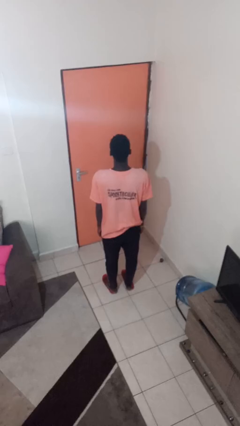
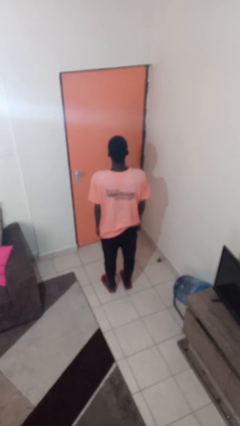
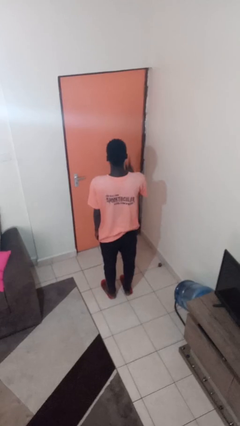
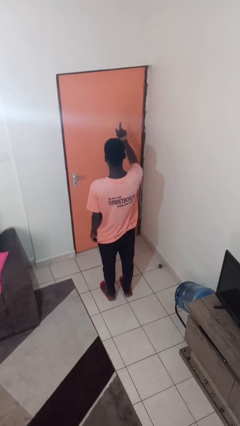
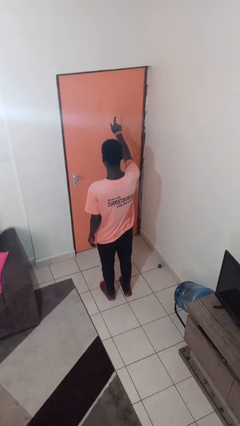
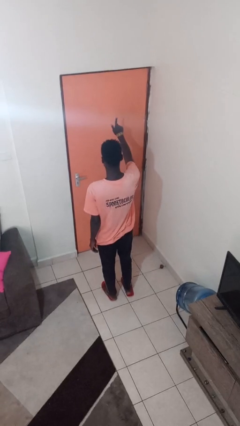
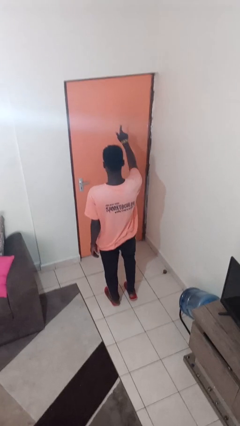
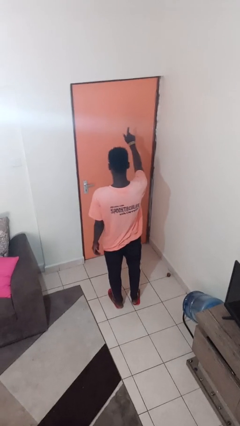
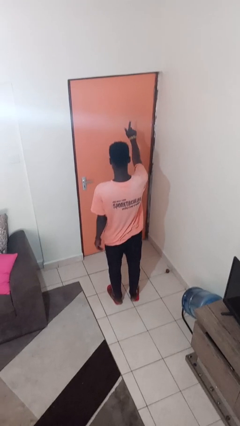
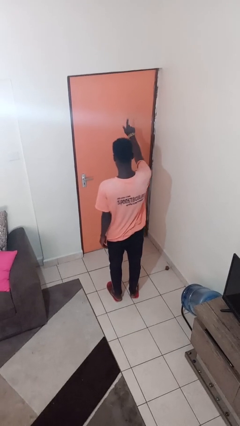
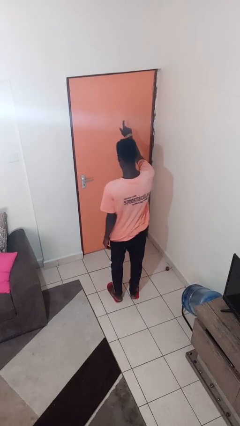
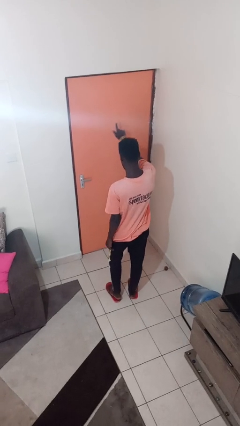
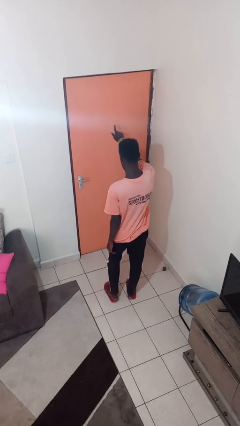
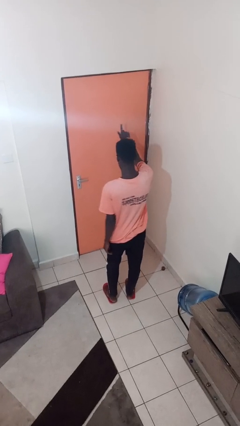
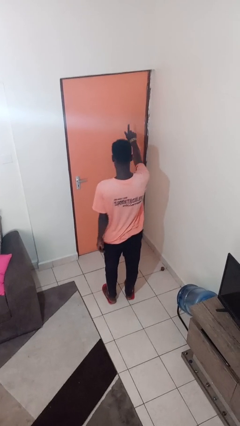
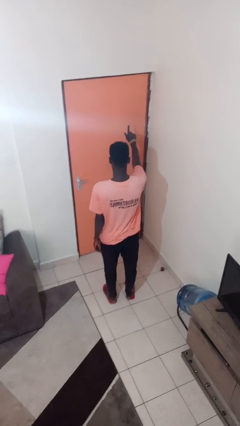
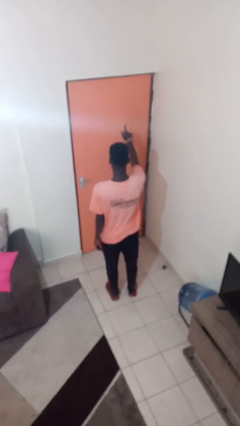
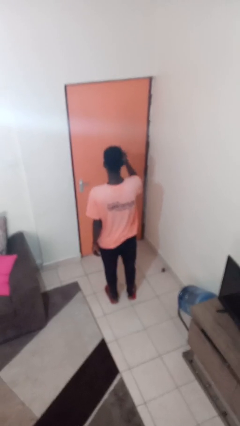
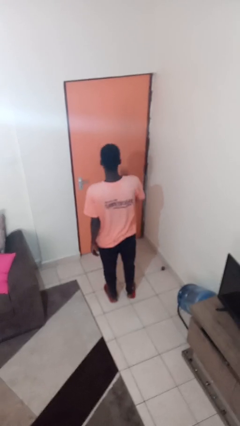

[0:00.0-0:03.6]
person gestures number one

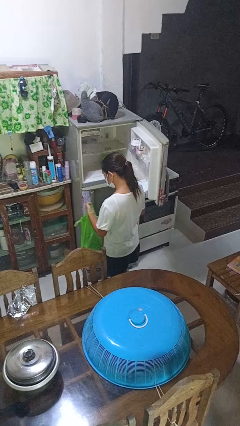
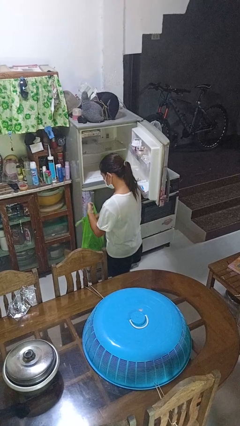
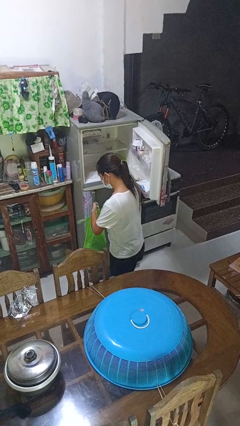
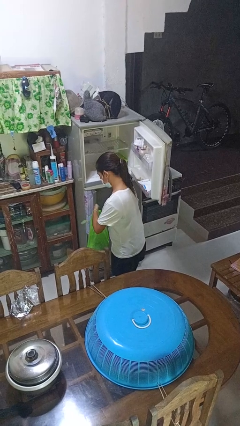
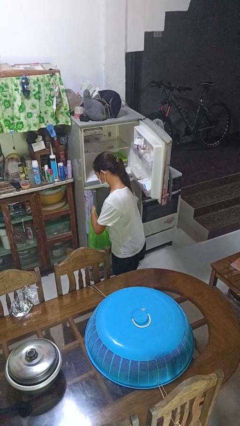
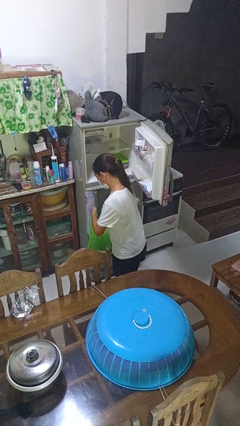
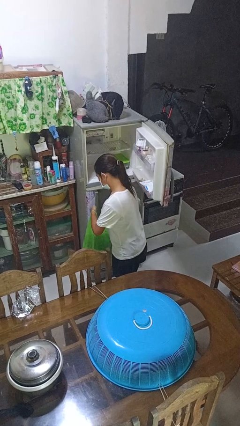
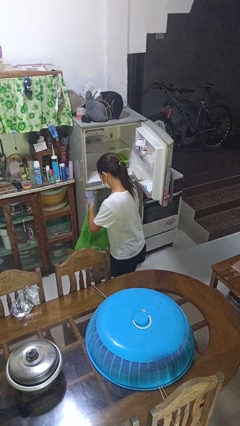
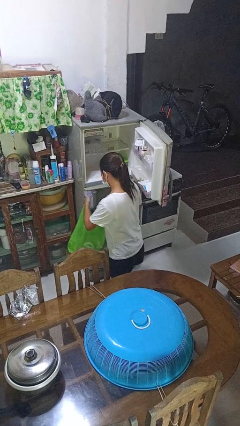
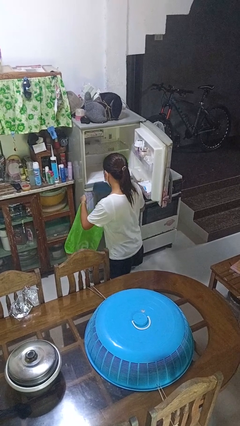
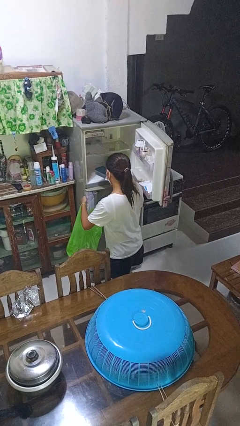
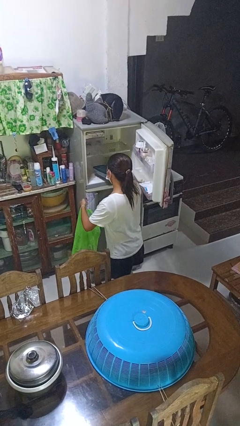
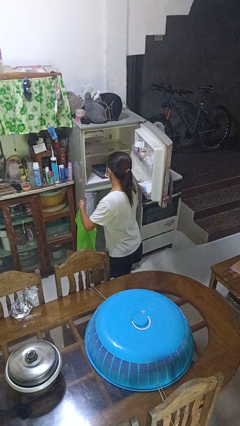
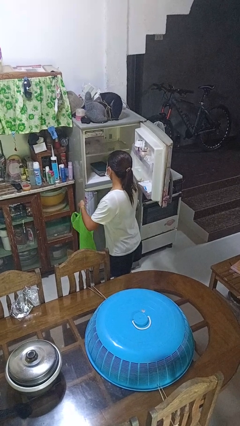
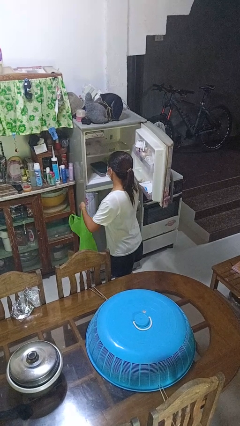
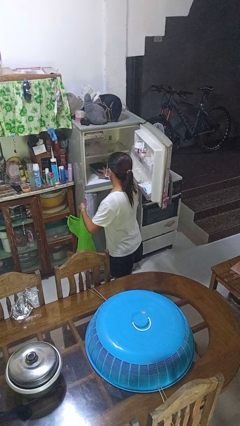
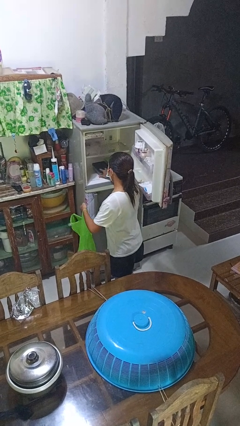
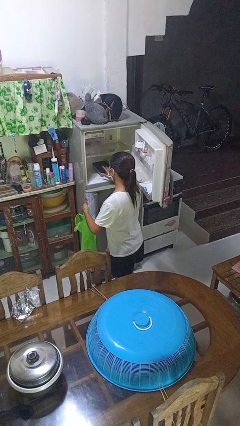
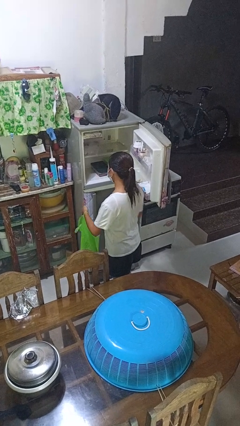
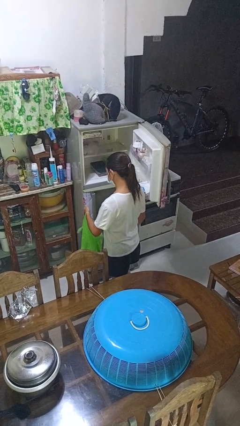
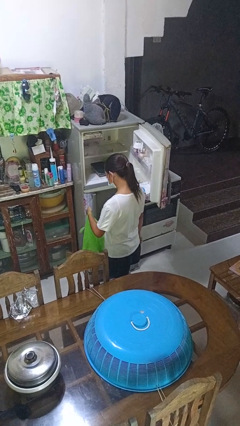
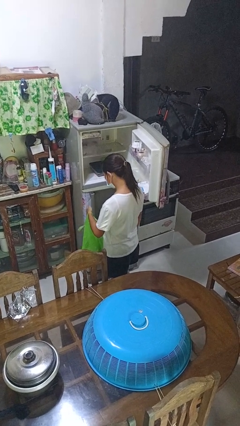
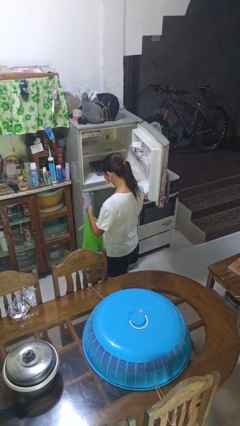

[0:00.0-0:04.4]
person loads groceries into refrigerator

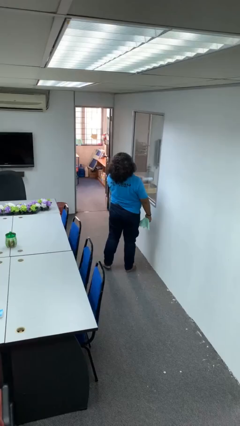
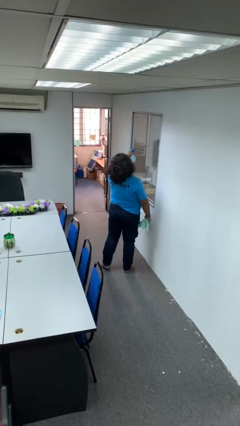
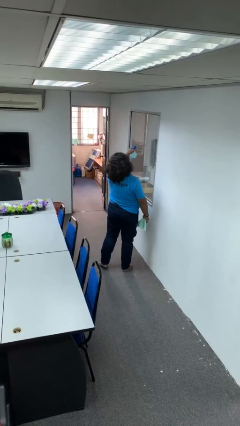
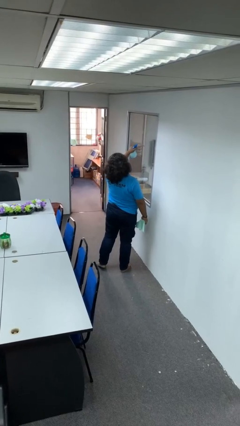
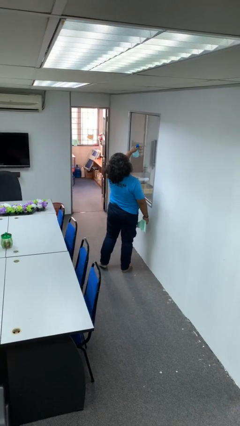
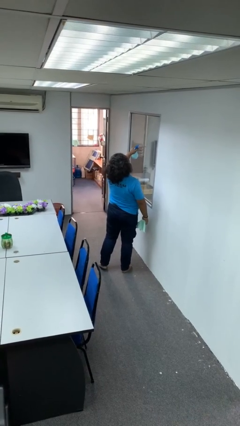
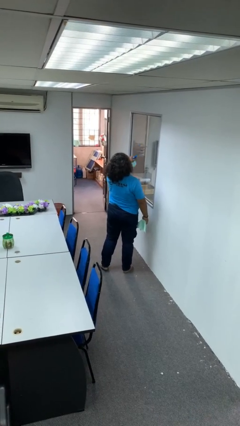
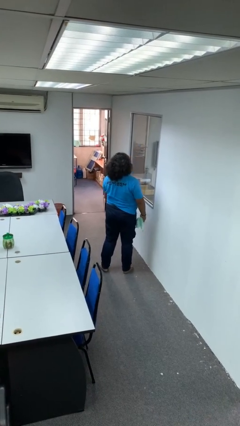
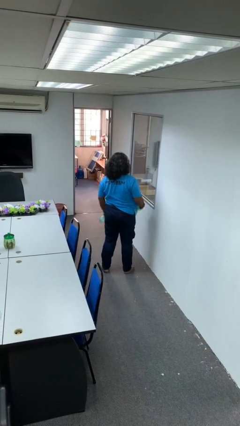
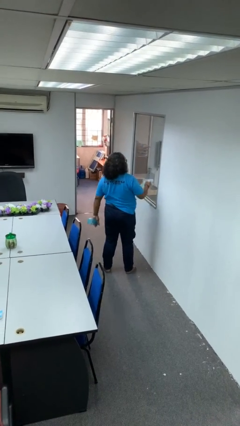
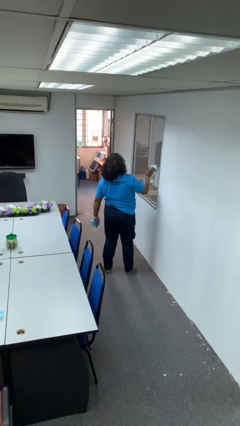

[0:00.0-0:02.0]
person sprays from bottle

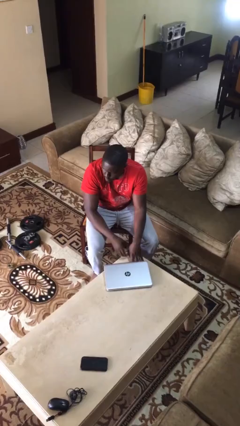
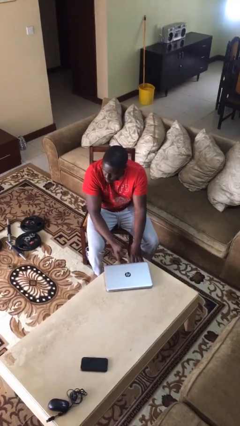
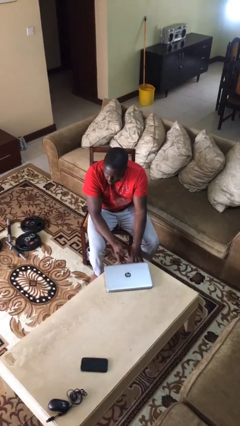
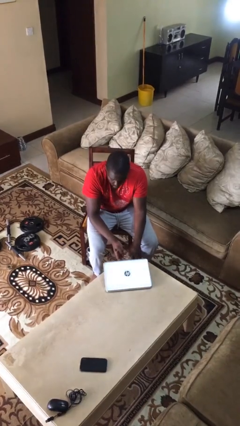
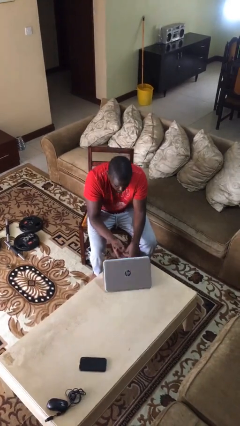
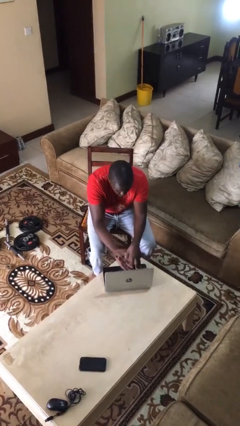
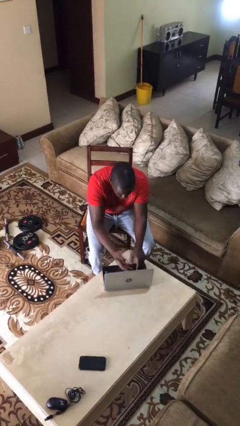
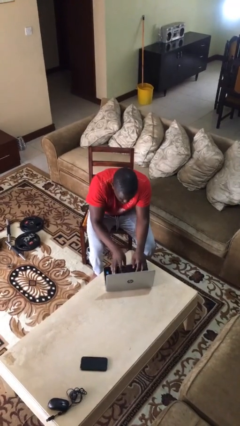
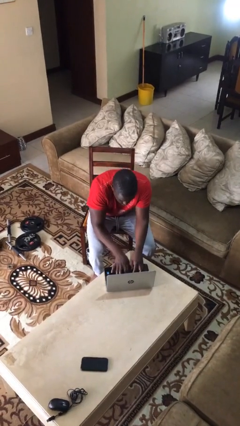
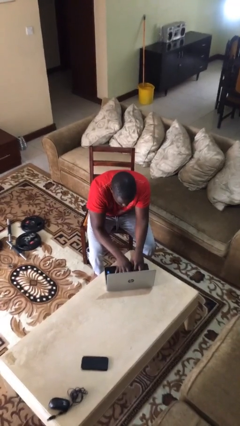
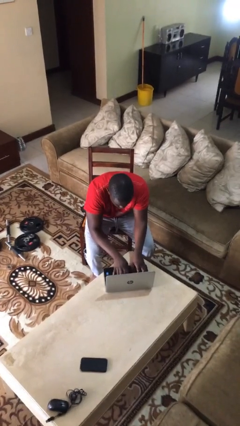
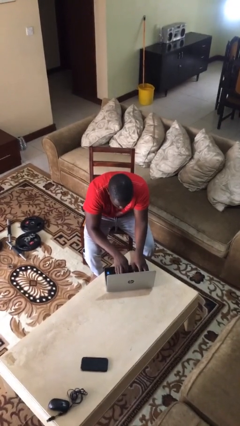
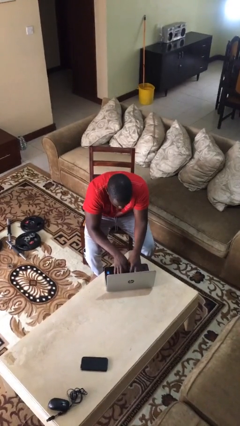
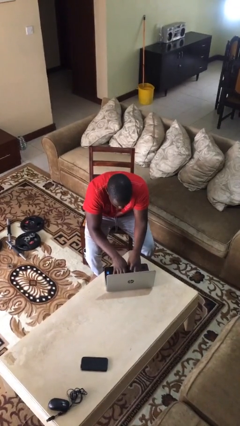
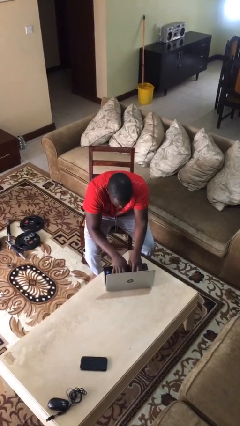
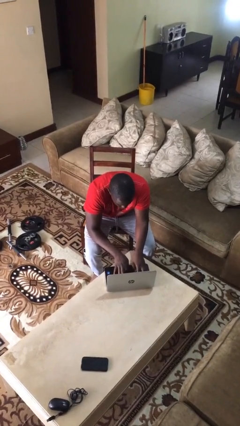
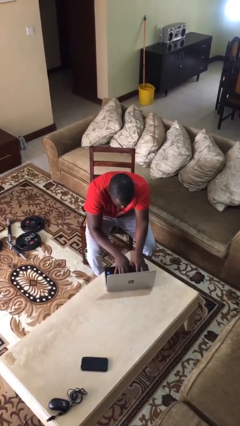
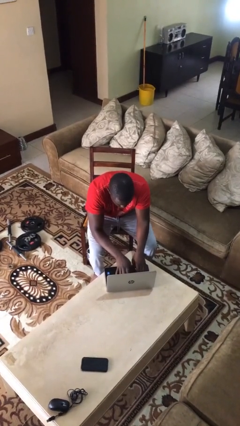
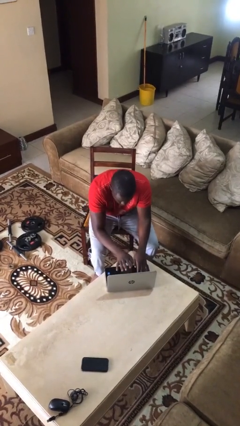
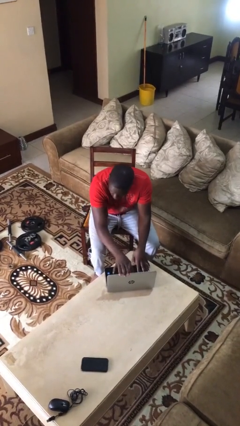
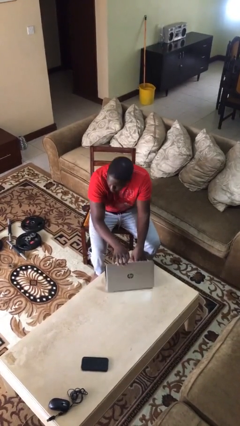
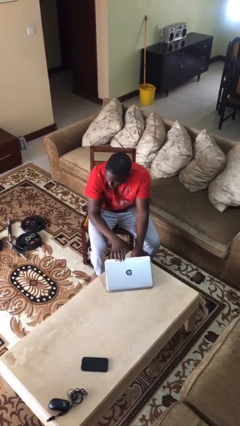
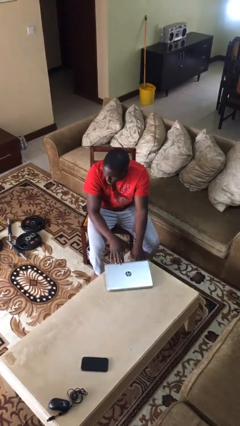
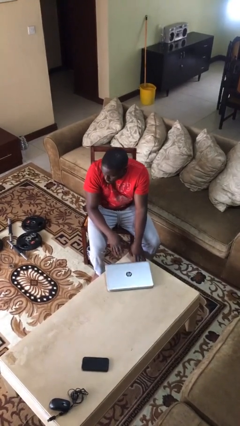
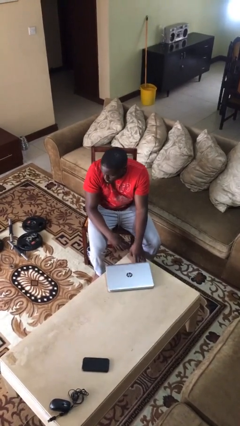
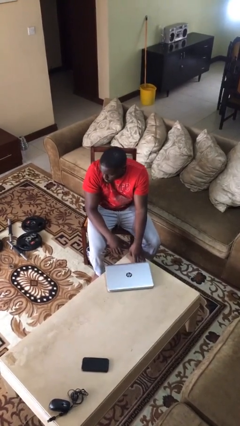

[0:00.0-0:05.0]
person interacts with laptop

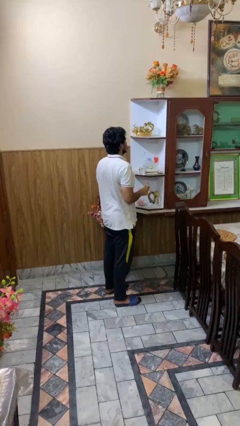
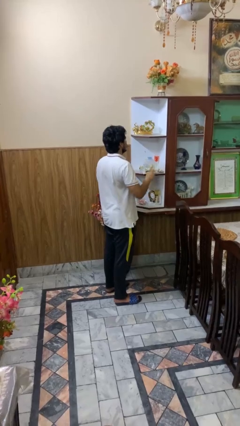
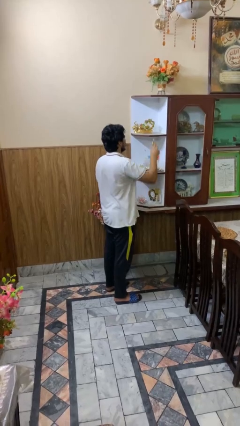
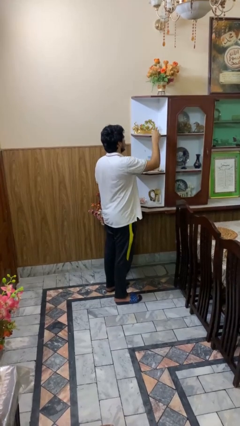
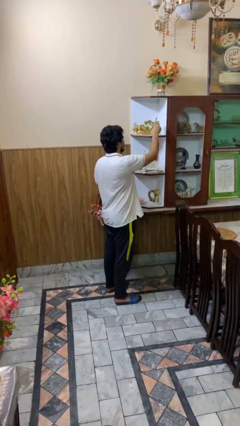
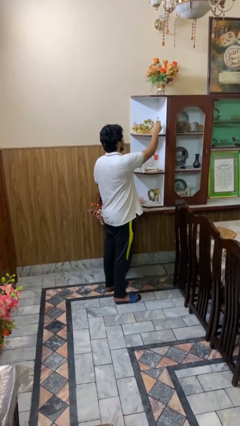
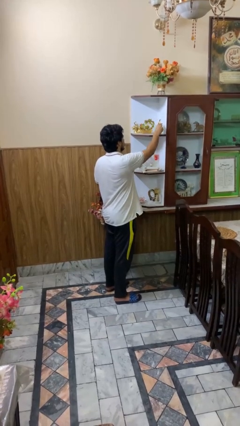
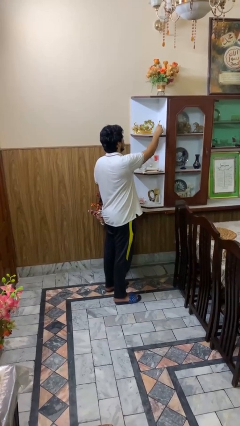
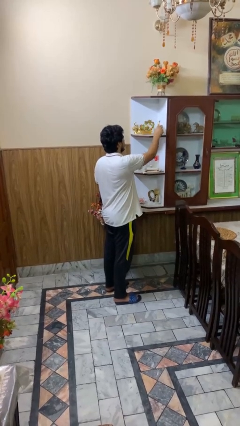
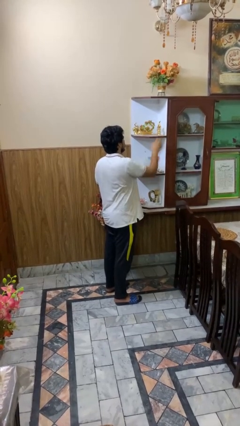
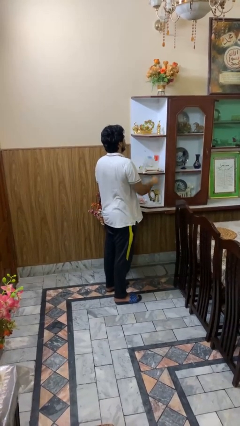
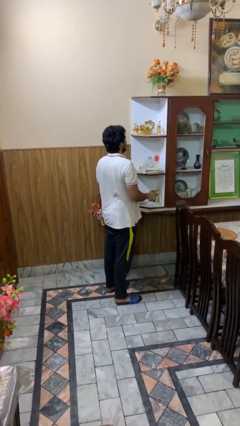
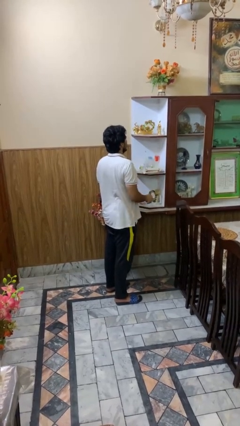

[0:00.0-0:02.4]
person puts down object on shelf

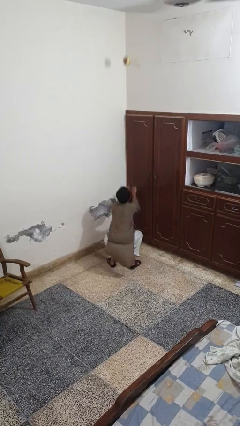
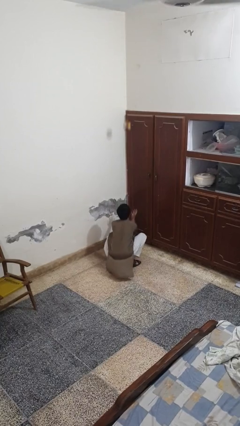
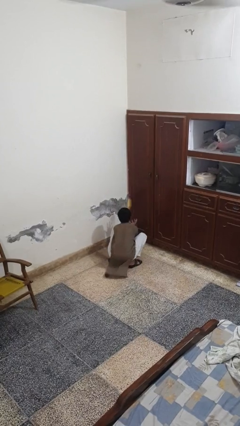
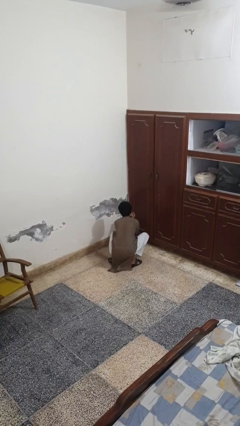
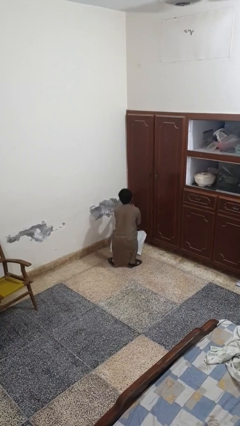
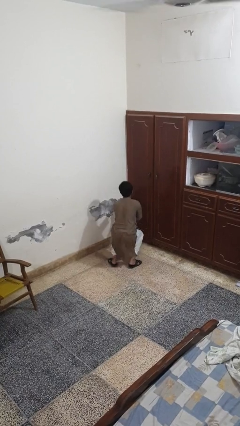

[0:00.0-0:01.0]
person catches dropped object
